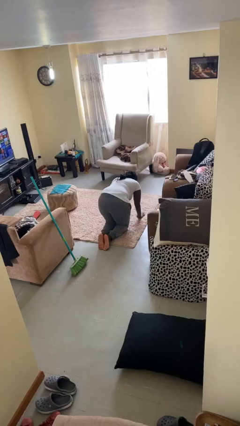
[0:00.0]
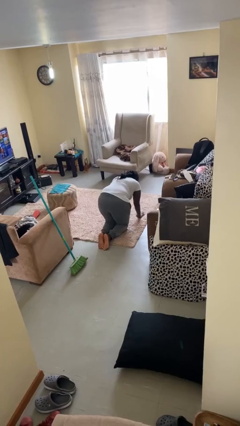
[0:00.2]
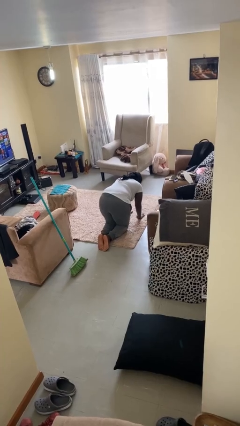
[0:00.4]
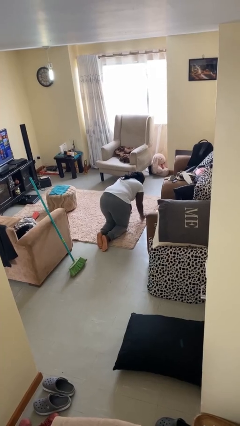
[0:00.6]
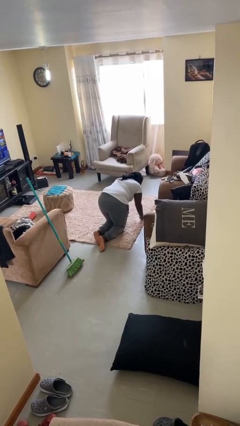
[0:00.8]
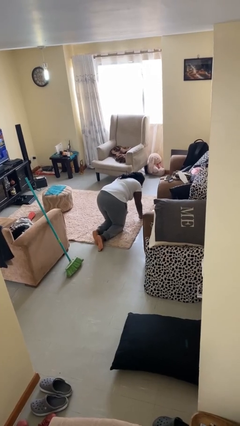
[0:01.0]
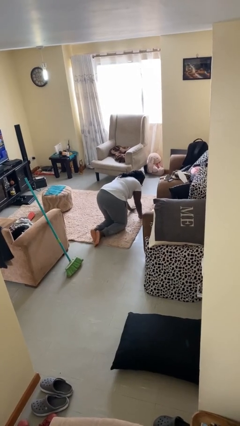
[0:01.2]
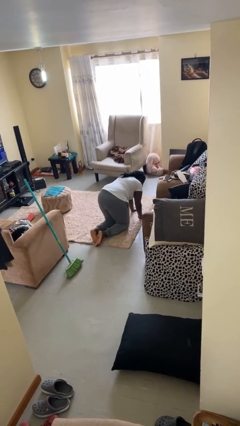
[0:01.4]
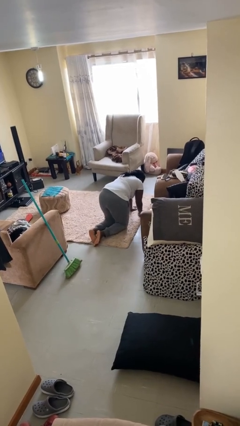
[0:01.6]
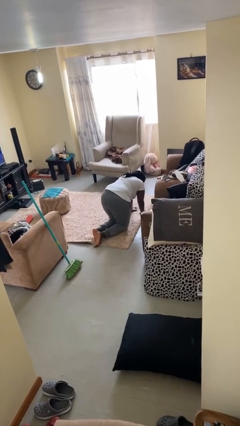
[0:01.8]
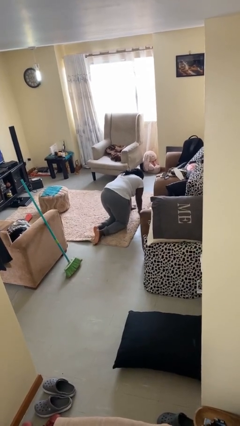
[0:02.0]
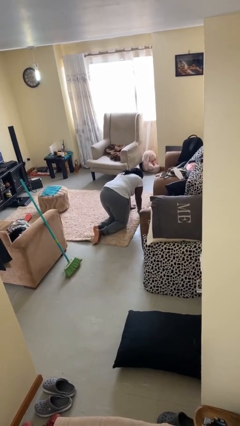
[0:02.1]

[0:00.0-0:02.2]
person crawls

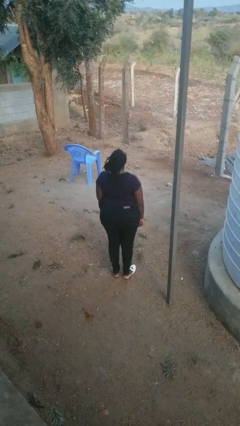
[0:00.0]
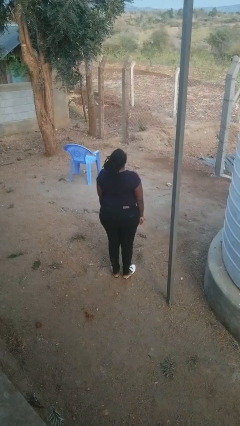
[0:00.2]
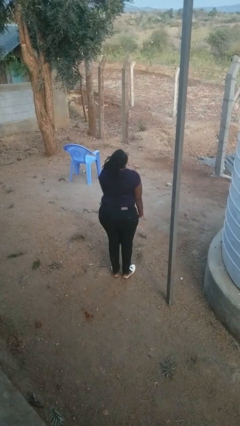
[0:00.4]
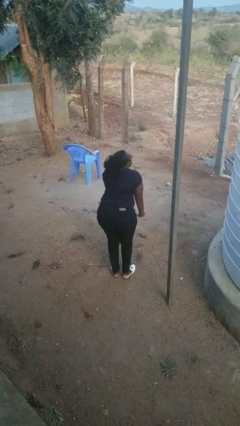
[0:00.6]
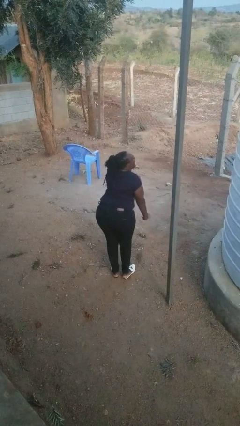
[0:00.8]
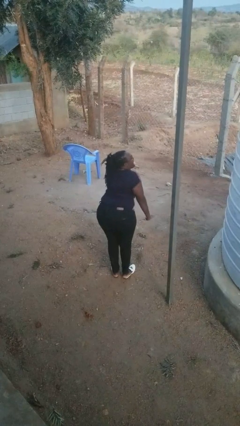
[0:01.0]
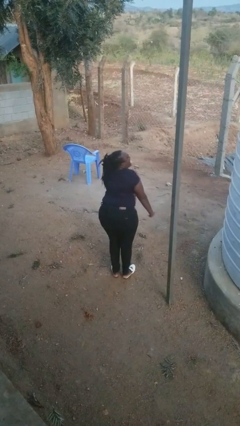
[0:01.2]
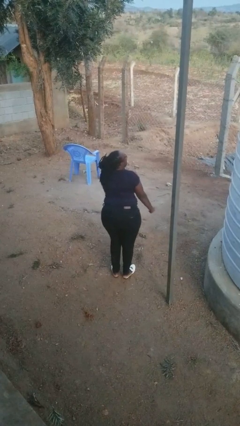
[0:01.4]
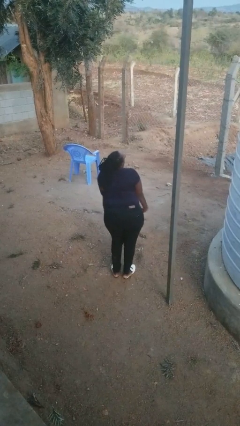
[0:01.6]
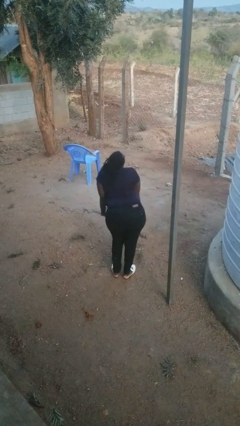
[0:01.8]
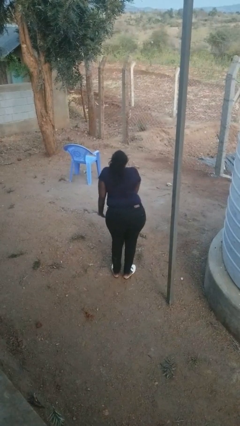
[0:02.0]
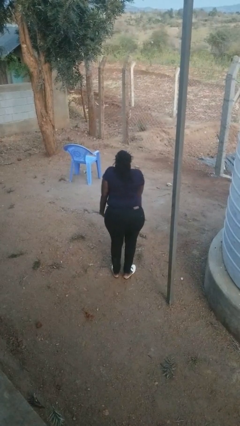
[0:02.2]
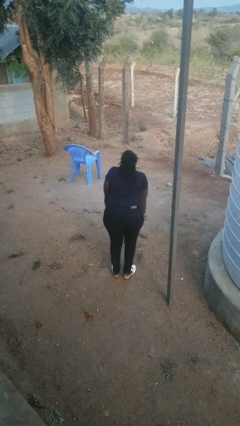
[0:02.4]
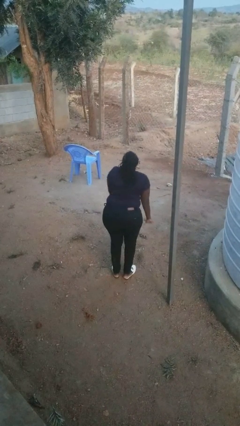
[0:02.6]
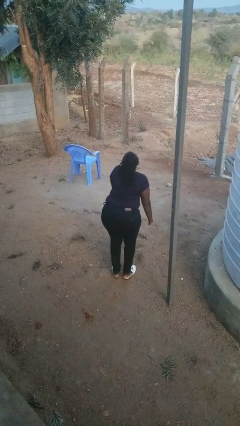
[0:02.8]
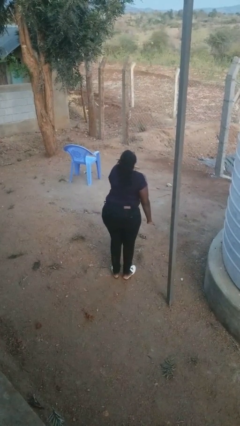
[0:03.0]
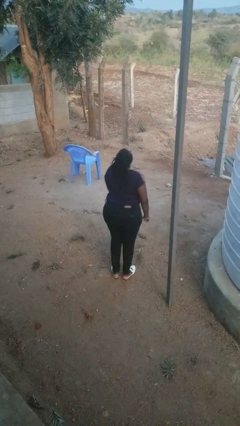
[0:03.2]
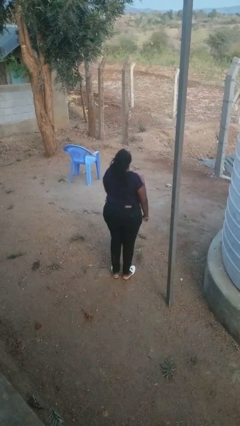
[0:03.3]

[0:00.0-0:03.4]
person dances in place

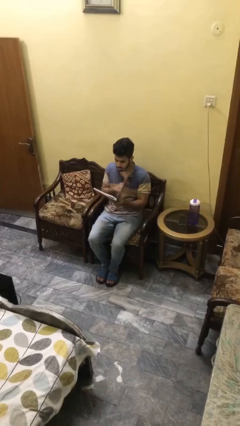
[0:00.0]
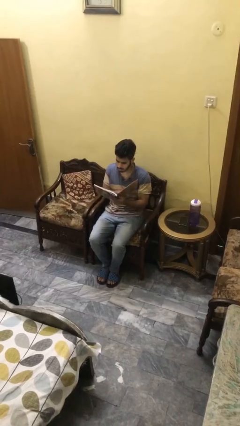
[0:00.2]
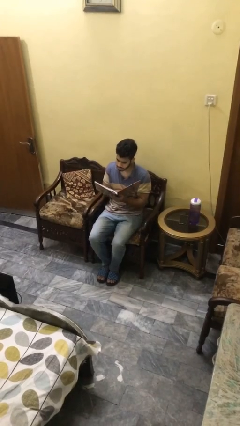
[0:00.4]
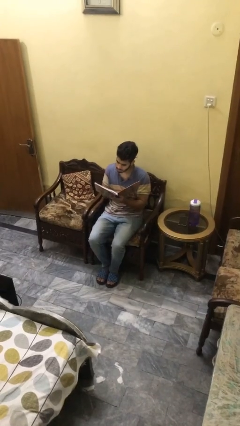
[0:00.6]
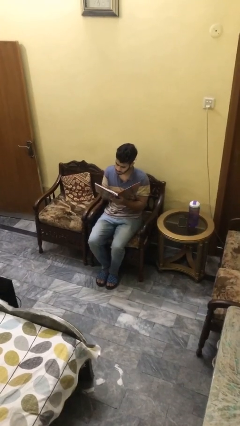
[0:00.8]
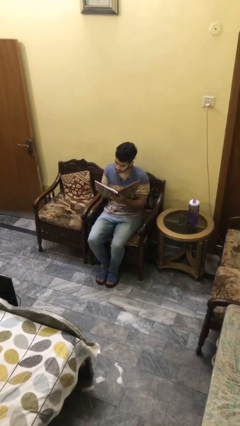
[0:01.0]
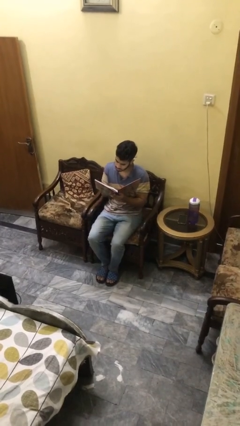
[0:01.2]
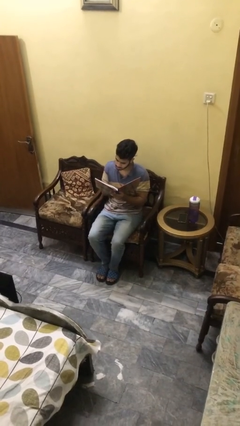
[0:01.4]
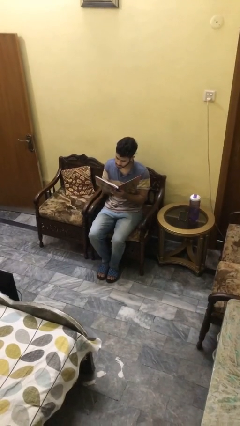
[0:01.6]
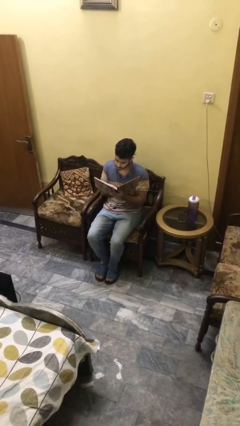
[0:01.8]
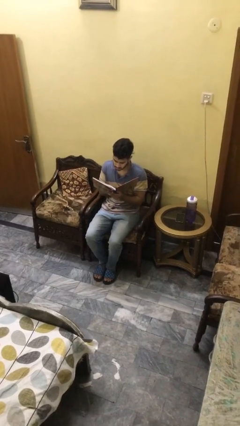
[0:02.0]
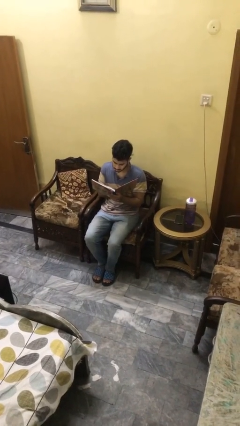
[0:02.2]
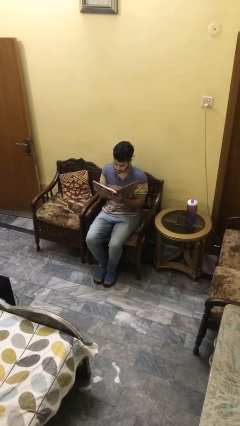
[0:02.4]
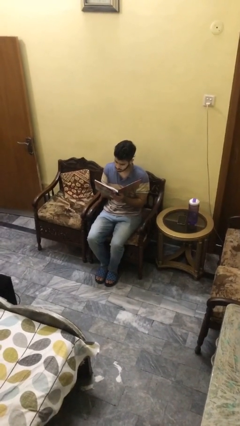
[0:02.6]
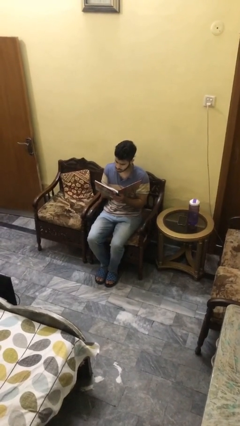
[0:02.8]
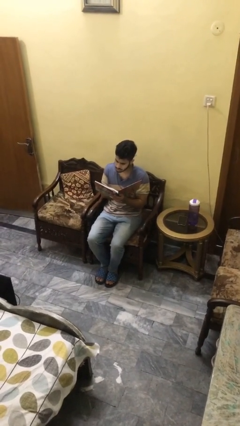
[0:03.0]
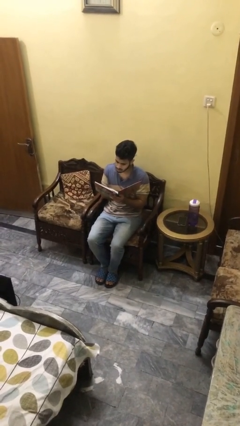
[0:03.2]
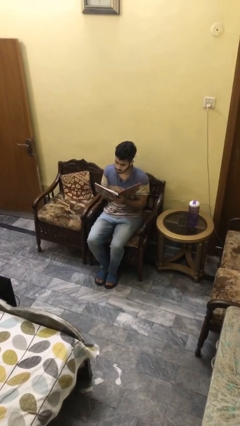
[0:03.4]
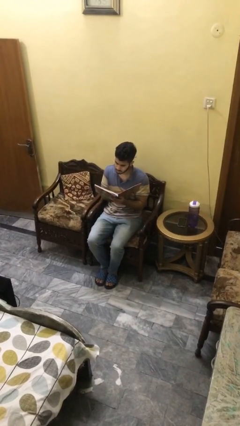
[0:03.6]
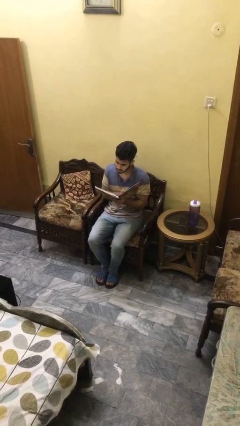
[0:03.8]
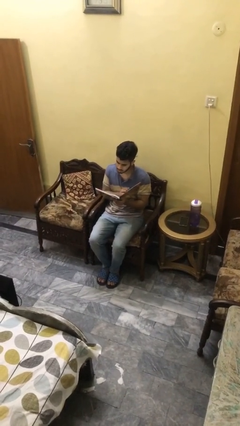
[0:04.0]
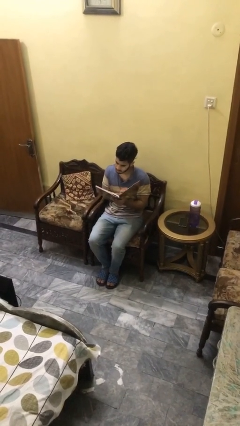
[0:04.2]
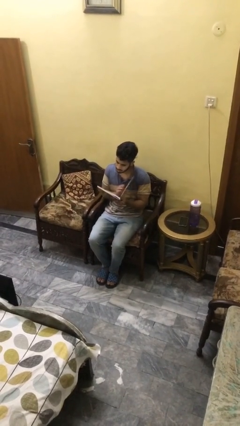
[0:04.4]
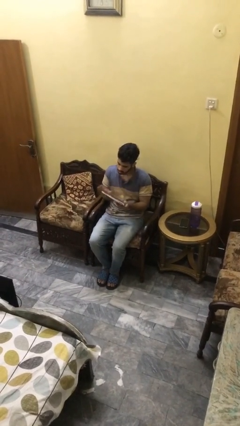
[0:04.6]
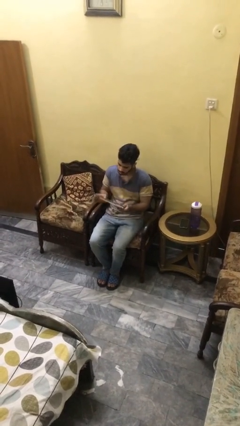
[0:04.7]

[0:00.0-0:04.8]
person reads document

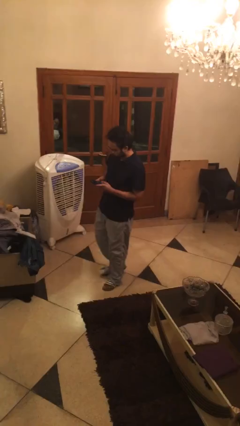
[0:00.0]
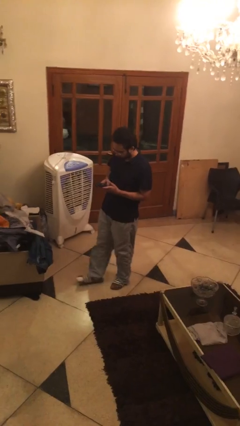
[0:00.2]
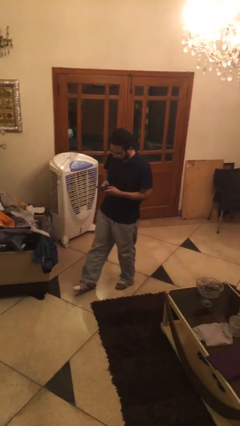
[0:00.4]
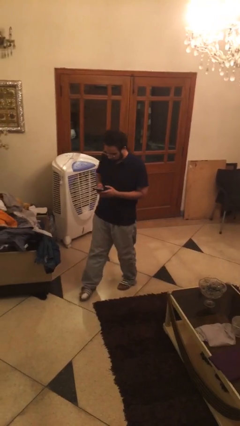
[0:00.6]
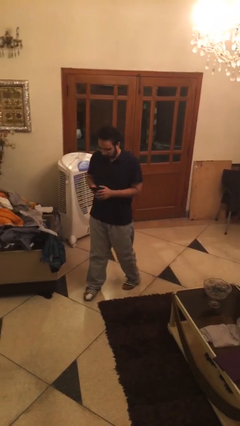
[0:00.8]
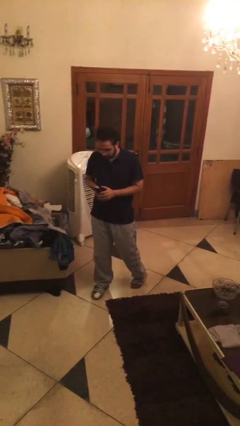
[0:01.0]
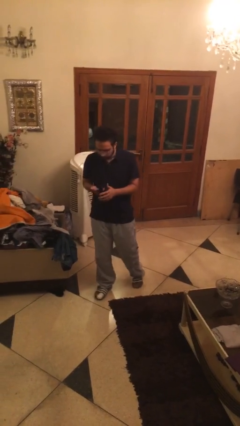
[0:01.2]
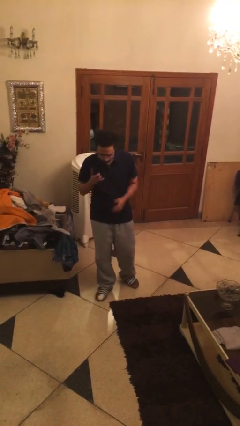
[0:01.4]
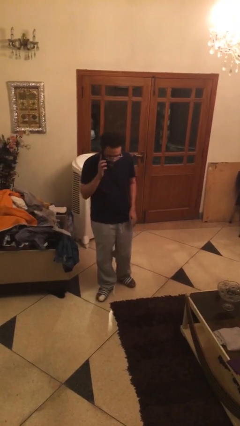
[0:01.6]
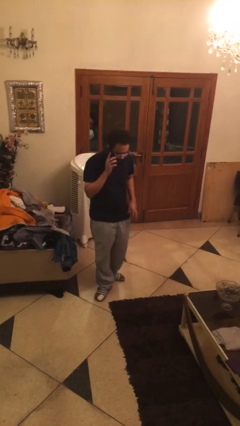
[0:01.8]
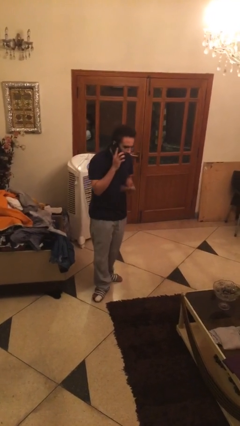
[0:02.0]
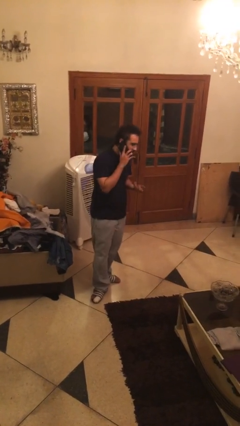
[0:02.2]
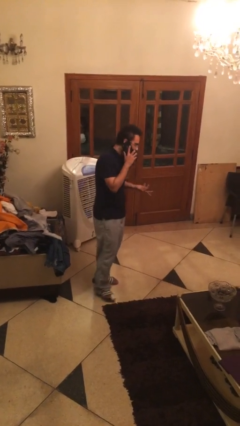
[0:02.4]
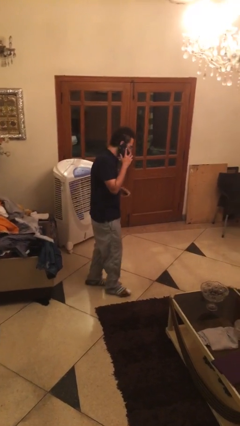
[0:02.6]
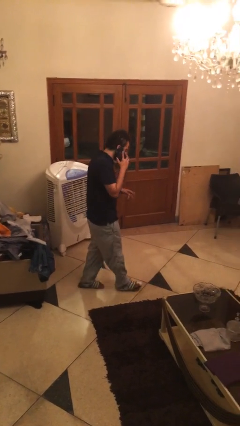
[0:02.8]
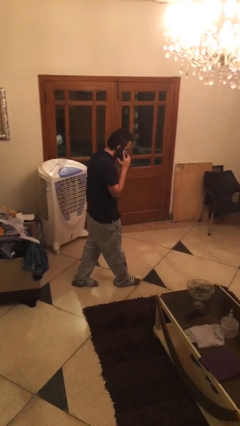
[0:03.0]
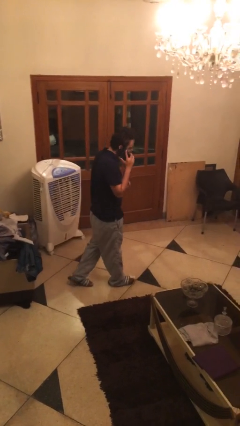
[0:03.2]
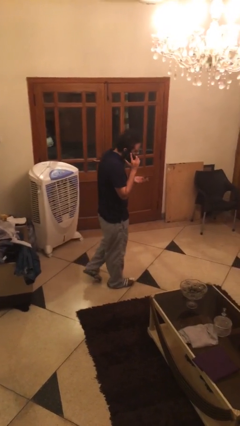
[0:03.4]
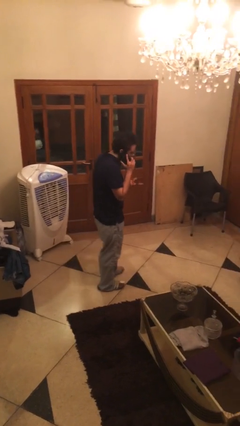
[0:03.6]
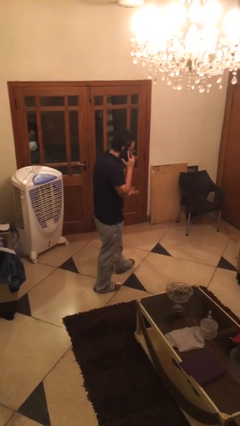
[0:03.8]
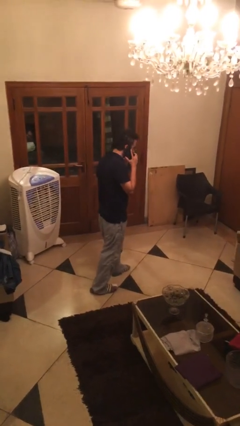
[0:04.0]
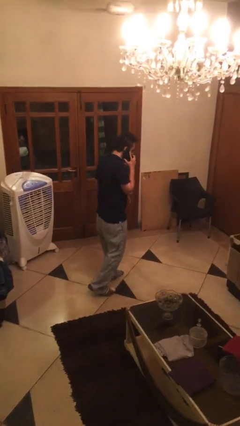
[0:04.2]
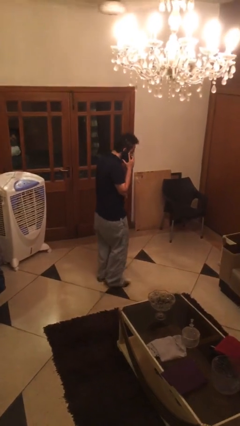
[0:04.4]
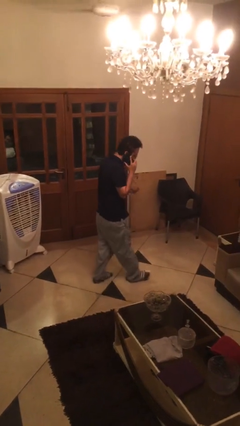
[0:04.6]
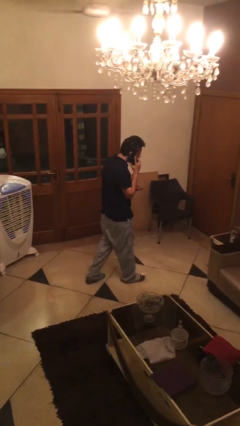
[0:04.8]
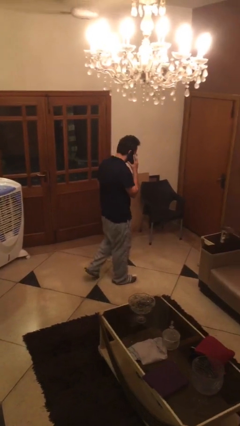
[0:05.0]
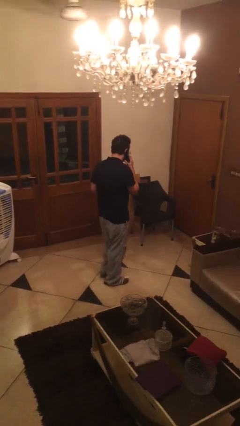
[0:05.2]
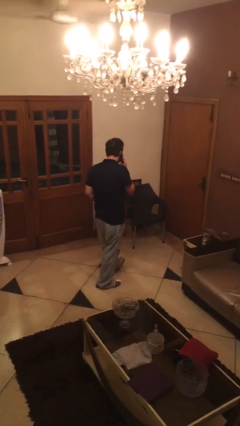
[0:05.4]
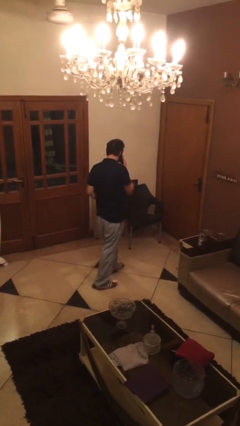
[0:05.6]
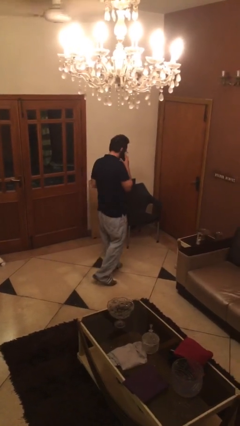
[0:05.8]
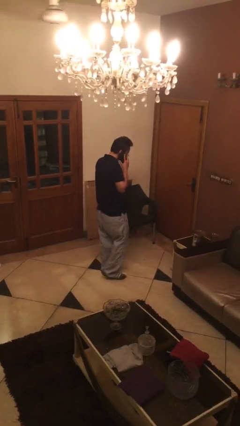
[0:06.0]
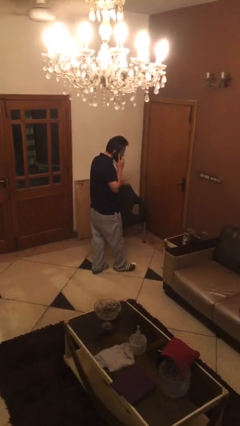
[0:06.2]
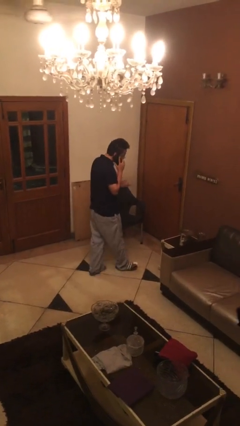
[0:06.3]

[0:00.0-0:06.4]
person talks on phone

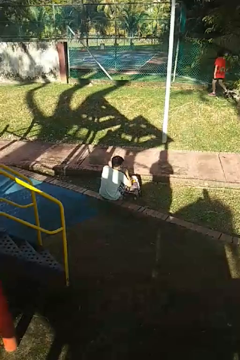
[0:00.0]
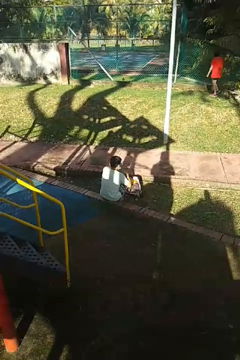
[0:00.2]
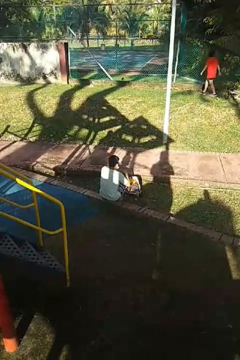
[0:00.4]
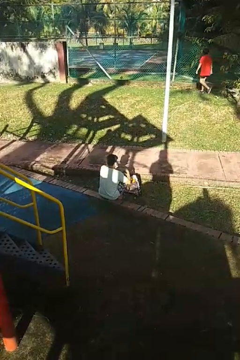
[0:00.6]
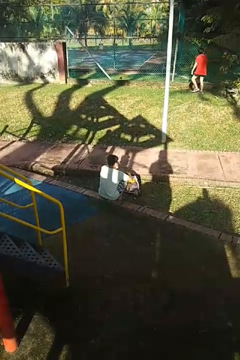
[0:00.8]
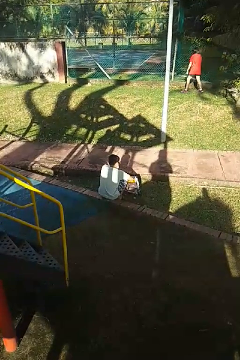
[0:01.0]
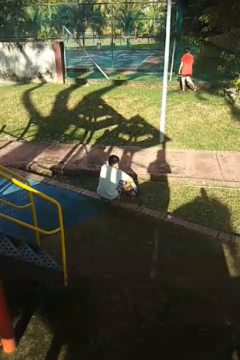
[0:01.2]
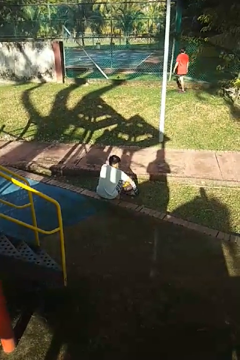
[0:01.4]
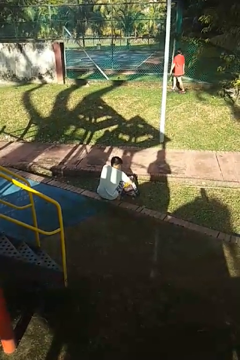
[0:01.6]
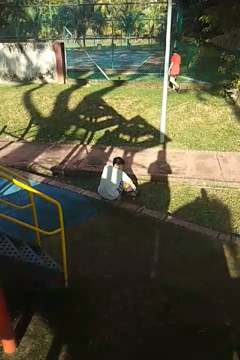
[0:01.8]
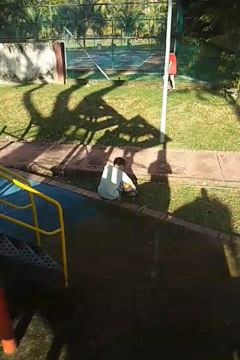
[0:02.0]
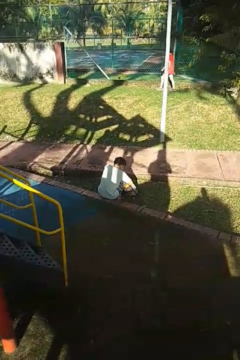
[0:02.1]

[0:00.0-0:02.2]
person searches in bag
